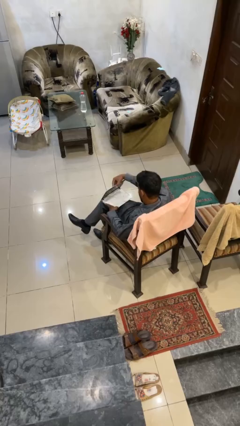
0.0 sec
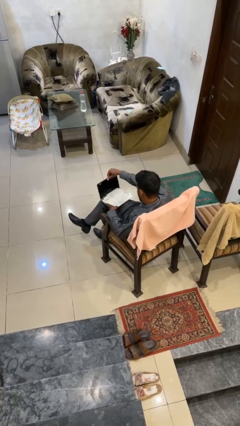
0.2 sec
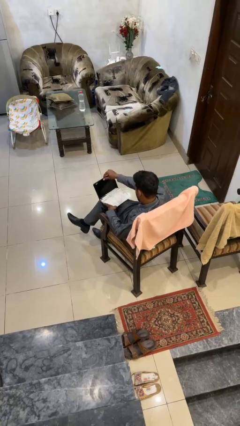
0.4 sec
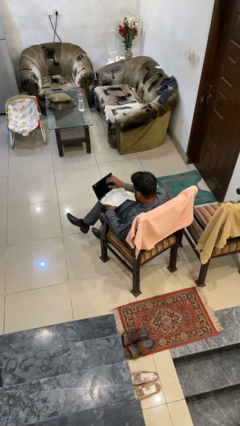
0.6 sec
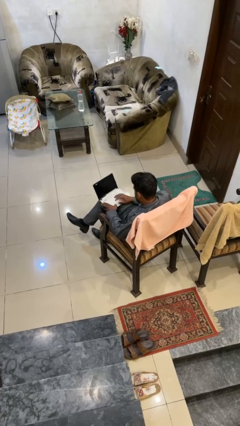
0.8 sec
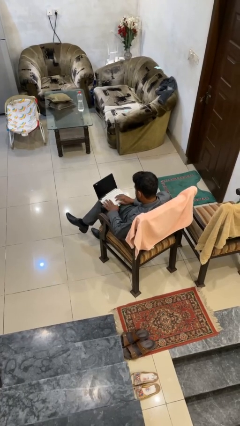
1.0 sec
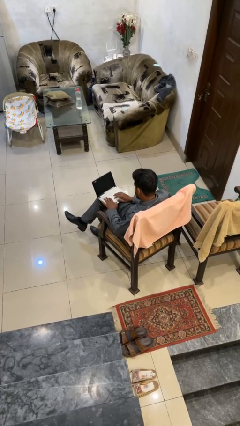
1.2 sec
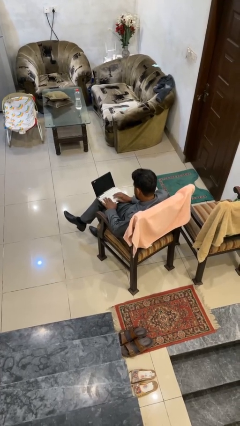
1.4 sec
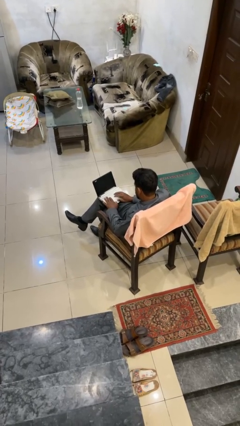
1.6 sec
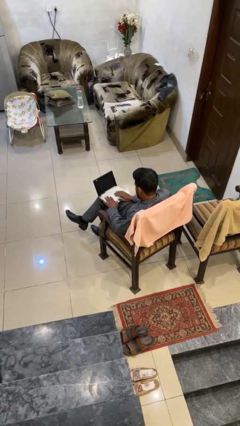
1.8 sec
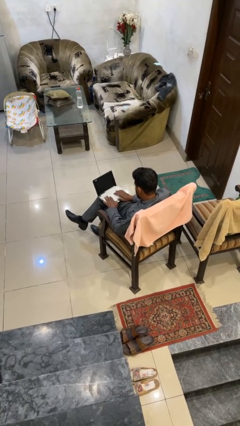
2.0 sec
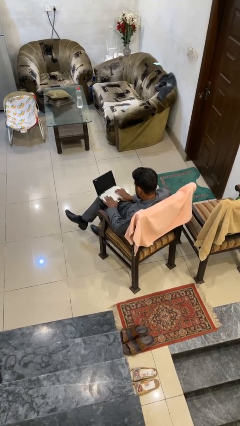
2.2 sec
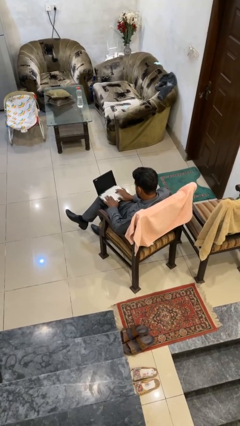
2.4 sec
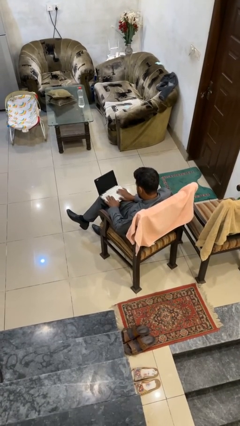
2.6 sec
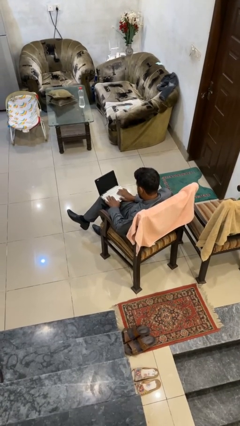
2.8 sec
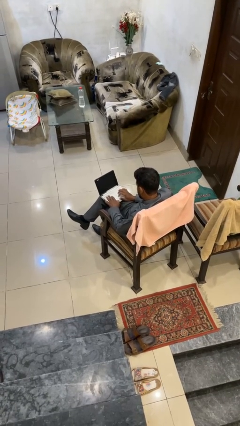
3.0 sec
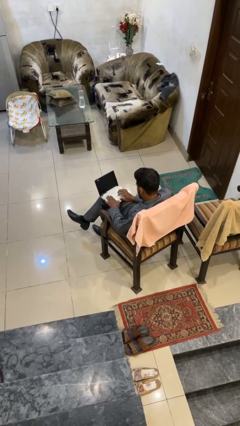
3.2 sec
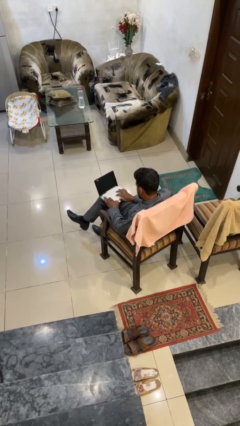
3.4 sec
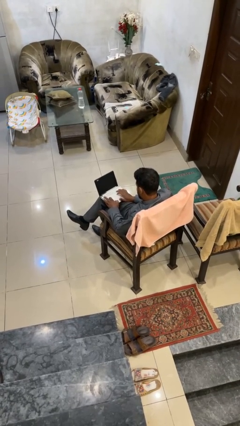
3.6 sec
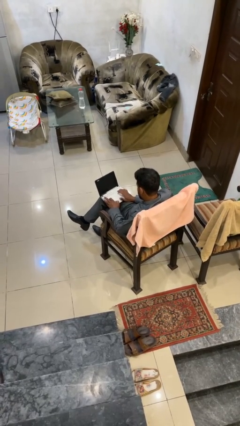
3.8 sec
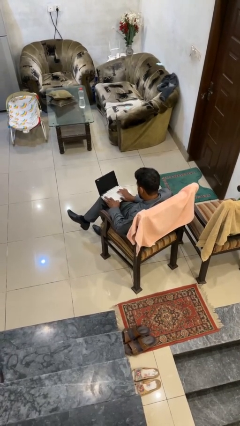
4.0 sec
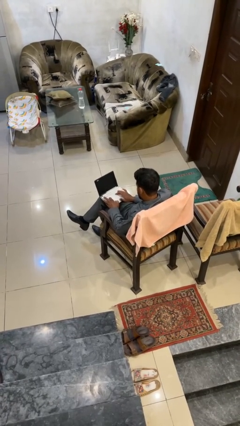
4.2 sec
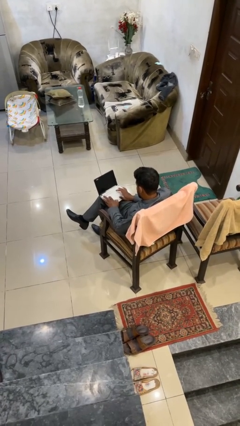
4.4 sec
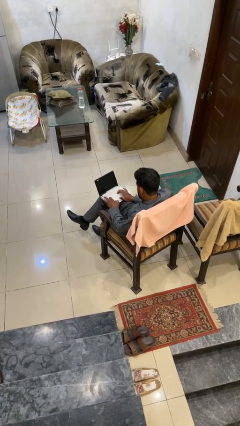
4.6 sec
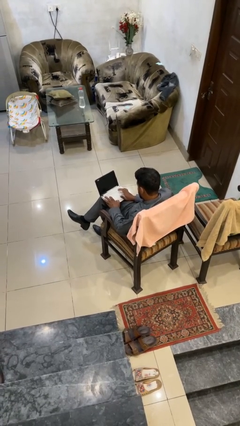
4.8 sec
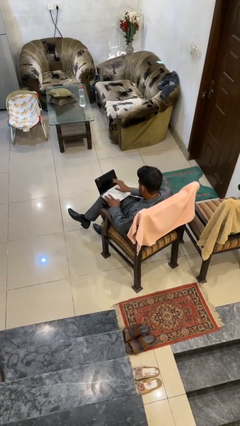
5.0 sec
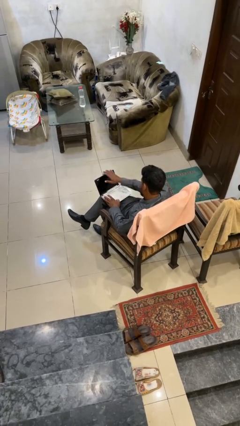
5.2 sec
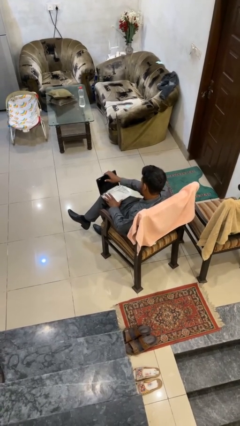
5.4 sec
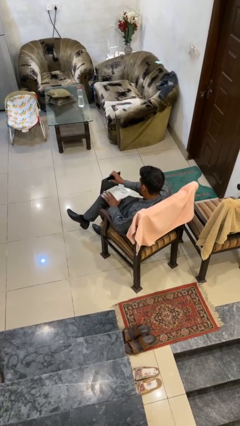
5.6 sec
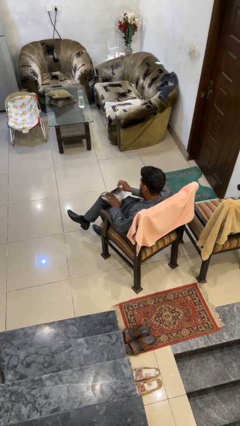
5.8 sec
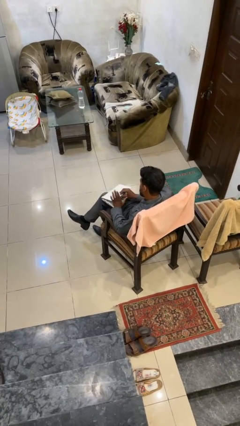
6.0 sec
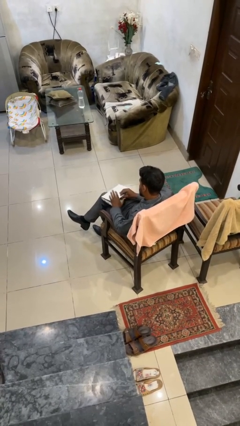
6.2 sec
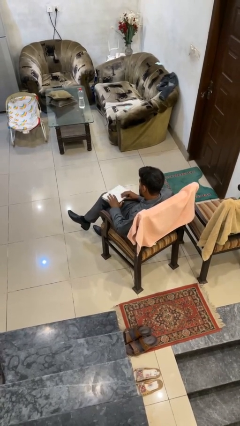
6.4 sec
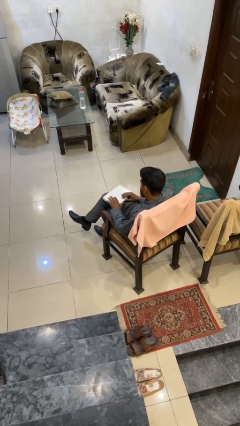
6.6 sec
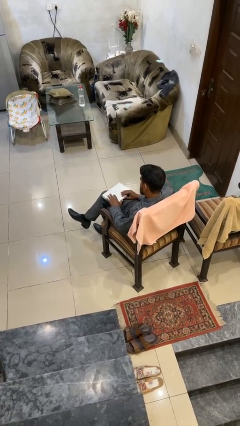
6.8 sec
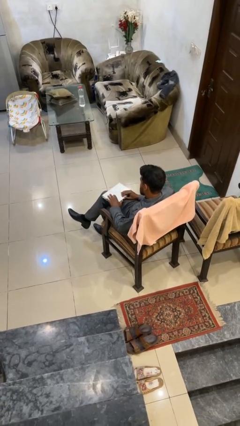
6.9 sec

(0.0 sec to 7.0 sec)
person interacts with laptop

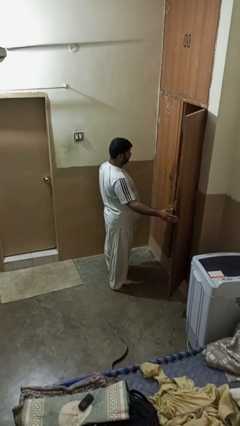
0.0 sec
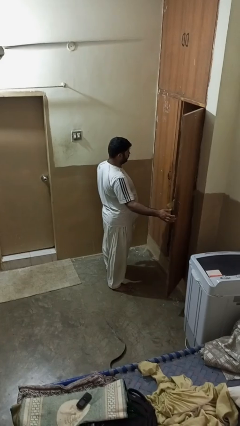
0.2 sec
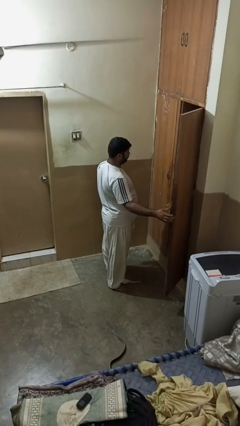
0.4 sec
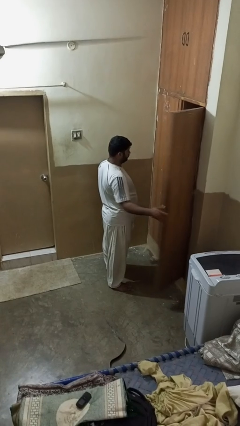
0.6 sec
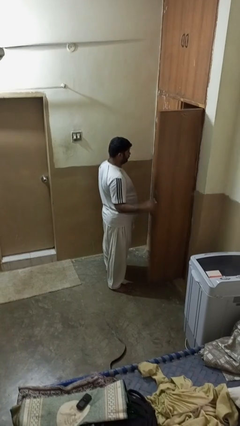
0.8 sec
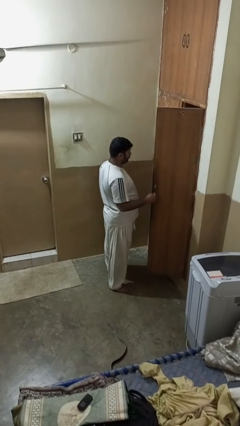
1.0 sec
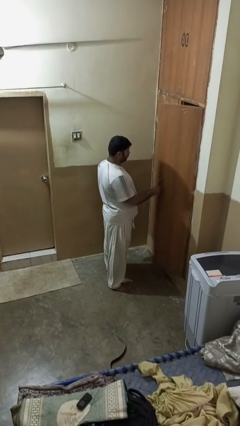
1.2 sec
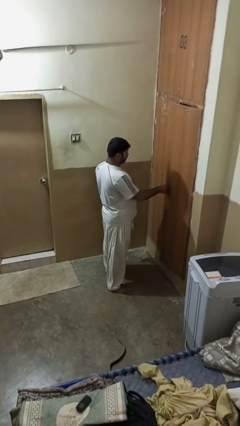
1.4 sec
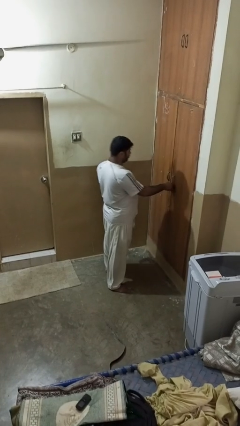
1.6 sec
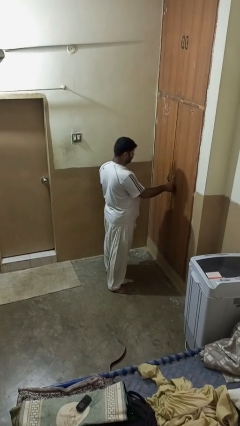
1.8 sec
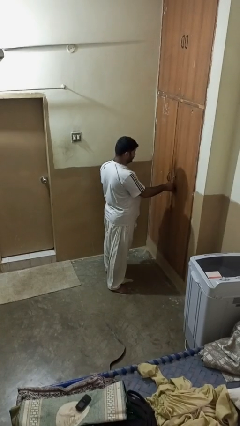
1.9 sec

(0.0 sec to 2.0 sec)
person closes closet door

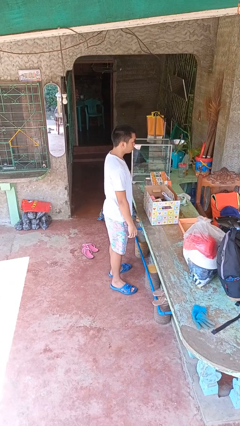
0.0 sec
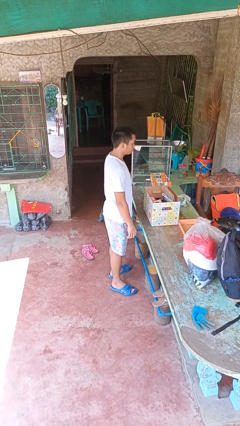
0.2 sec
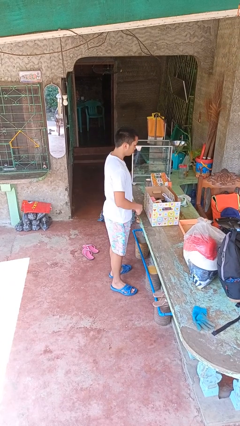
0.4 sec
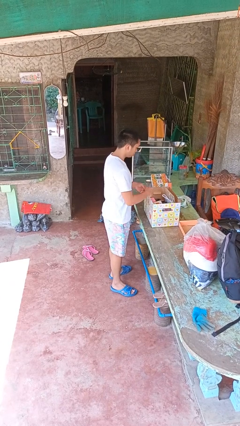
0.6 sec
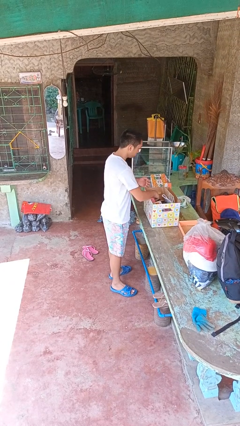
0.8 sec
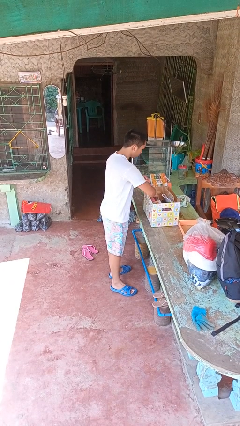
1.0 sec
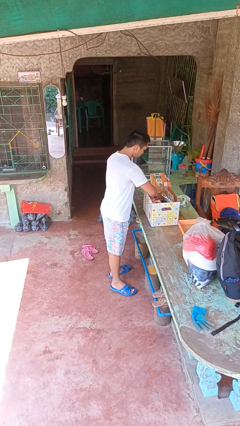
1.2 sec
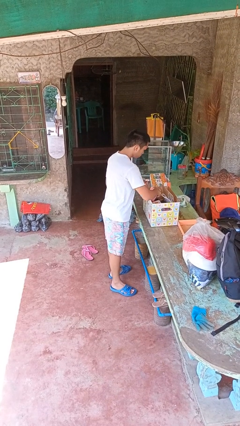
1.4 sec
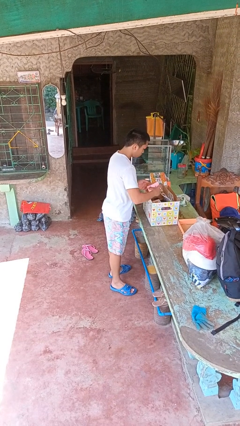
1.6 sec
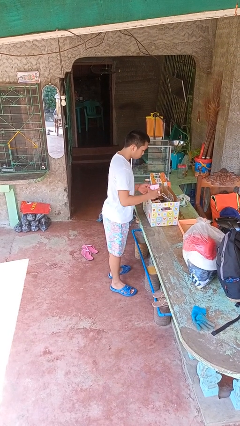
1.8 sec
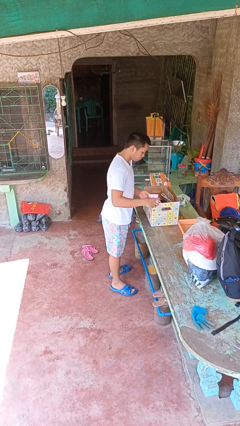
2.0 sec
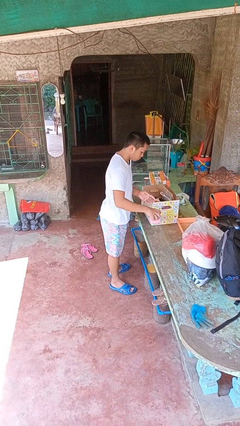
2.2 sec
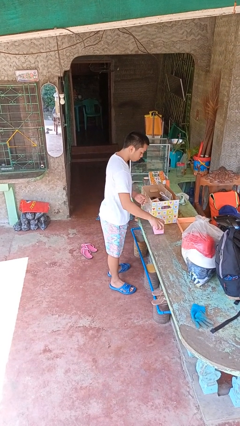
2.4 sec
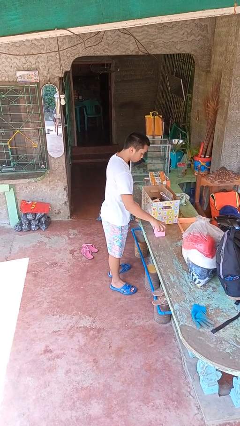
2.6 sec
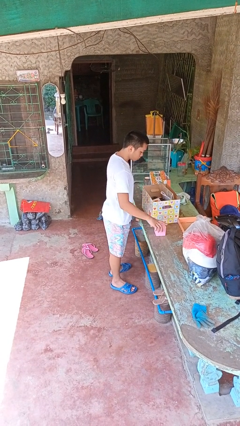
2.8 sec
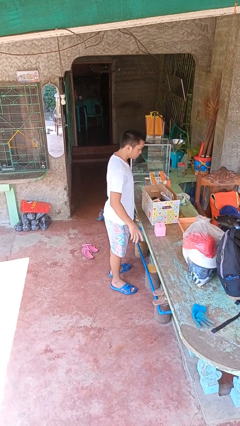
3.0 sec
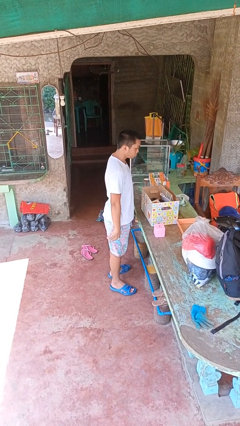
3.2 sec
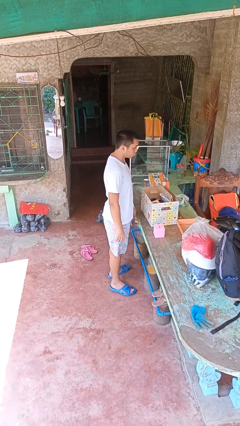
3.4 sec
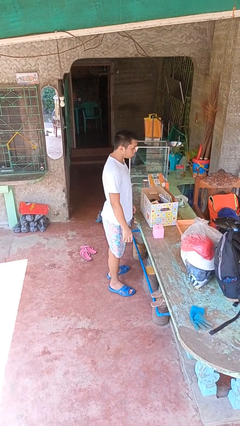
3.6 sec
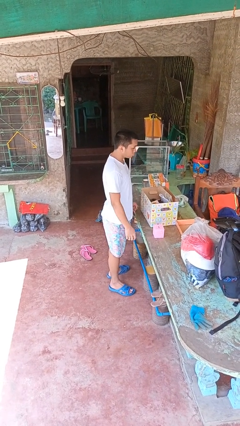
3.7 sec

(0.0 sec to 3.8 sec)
person takes object from box

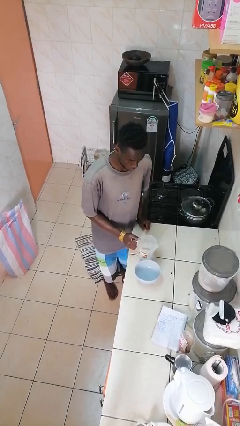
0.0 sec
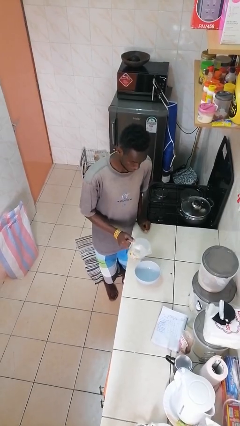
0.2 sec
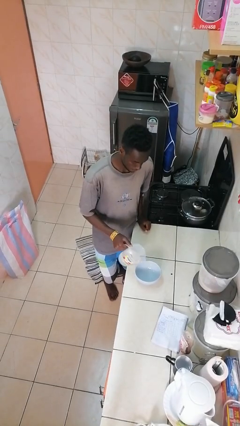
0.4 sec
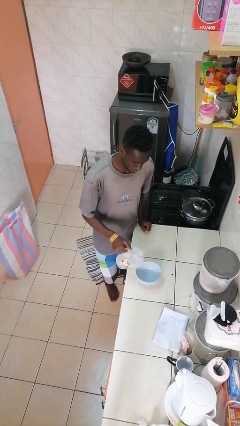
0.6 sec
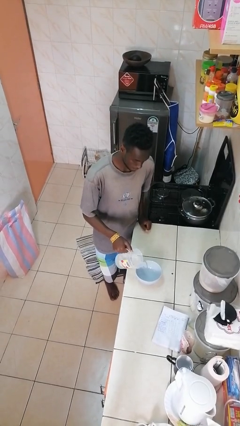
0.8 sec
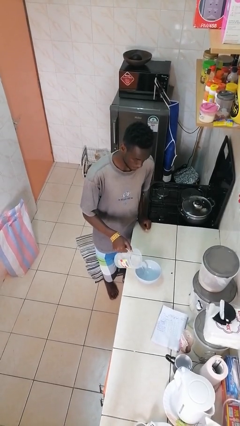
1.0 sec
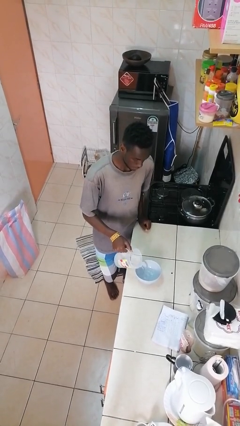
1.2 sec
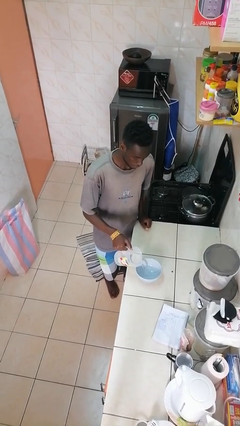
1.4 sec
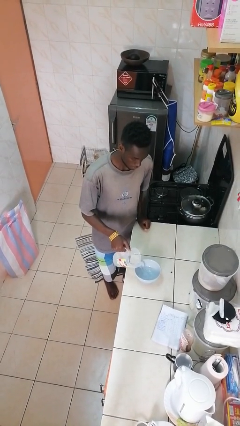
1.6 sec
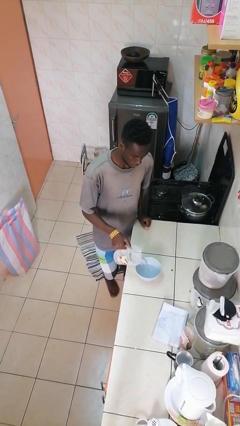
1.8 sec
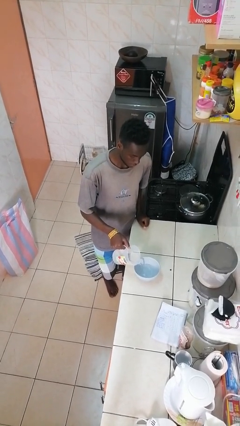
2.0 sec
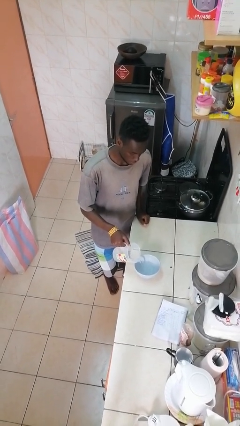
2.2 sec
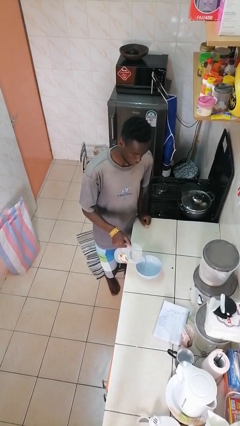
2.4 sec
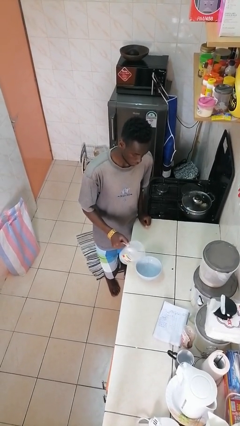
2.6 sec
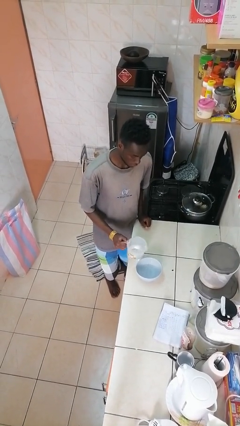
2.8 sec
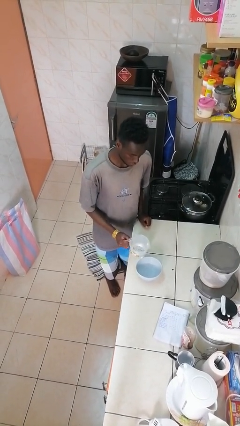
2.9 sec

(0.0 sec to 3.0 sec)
person pours into bowl

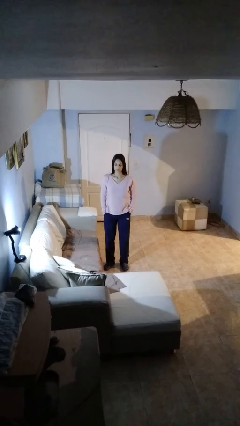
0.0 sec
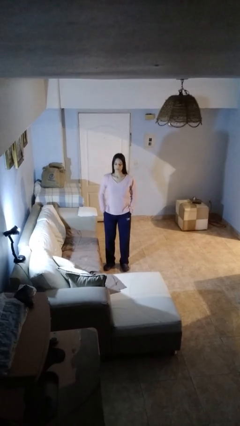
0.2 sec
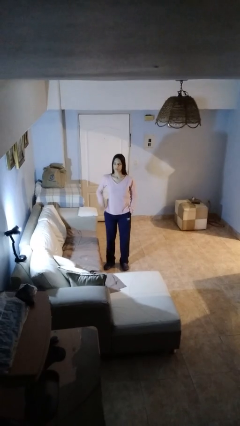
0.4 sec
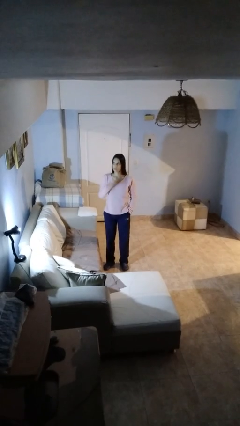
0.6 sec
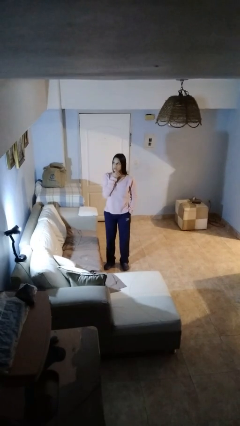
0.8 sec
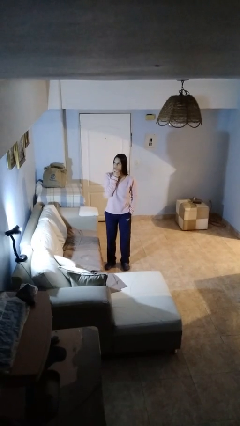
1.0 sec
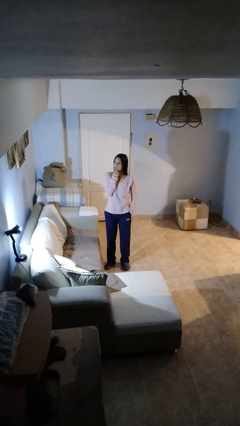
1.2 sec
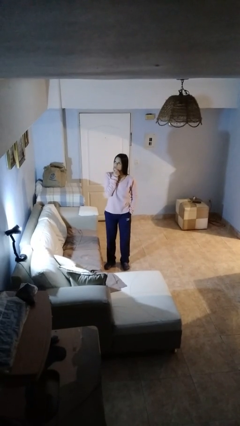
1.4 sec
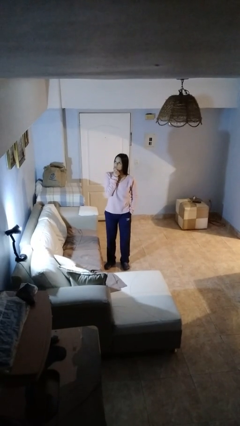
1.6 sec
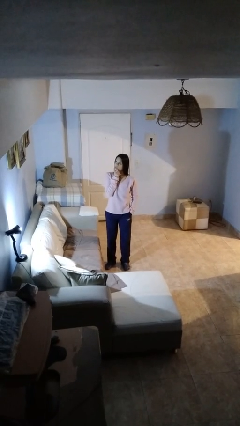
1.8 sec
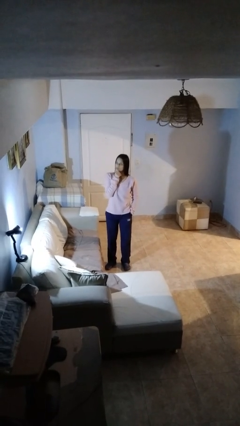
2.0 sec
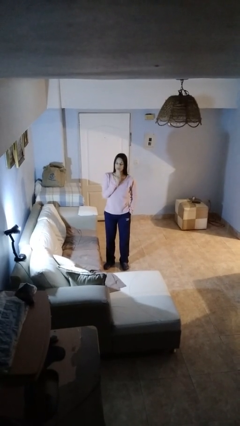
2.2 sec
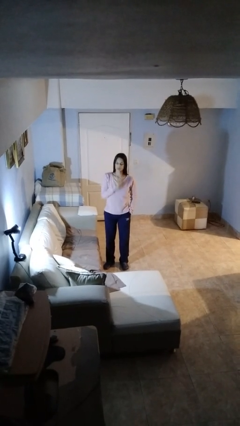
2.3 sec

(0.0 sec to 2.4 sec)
person strokes chin
